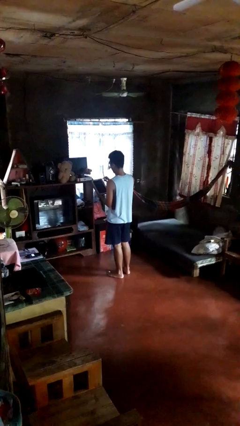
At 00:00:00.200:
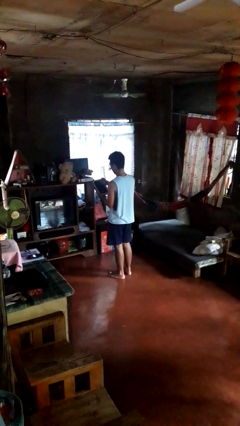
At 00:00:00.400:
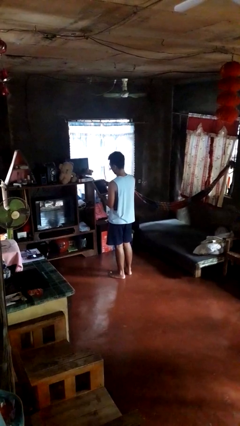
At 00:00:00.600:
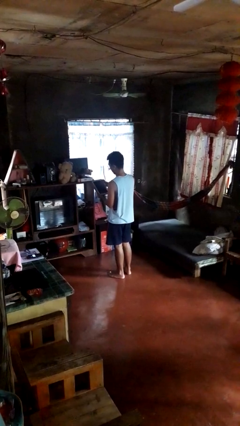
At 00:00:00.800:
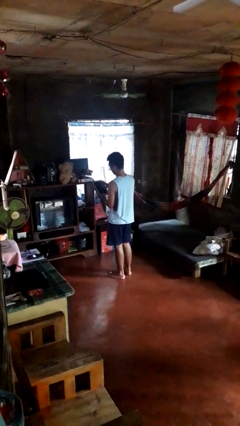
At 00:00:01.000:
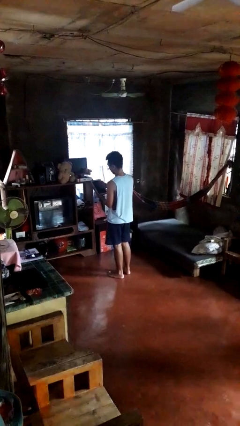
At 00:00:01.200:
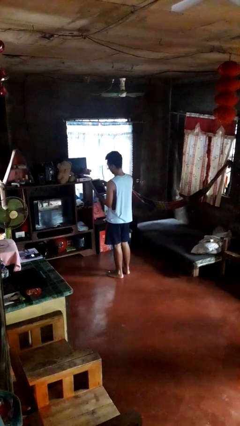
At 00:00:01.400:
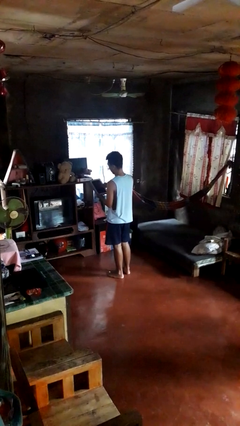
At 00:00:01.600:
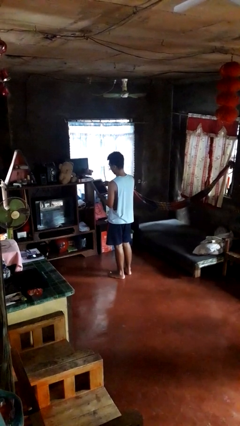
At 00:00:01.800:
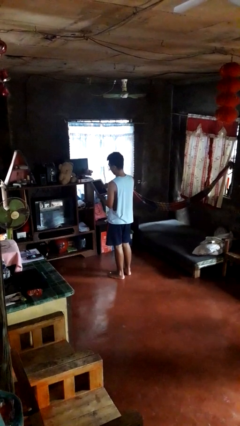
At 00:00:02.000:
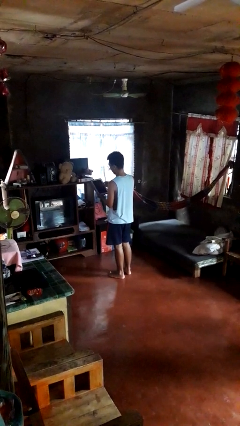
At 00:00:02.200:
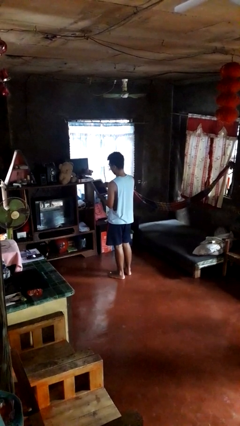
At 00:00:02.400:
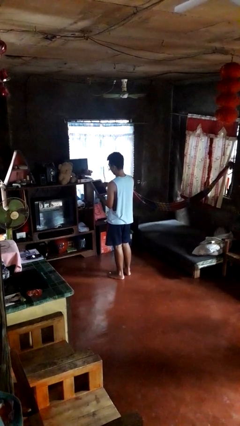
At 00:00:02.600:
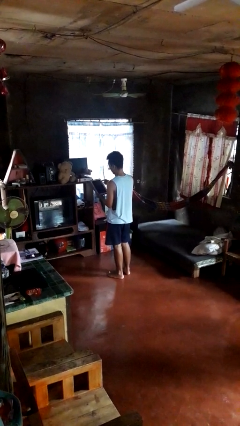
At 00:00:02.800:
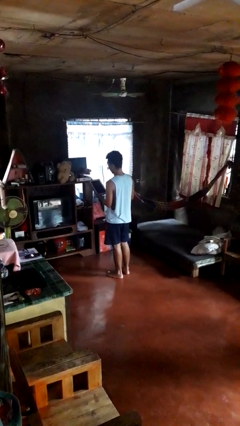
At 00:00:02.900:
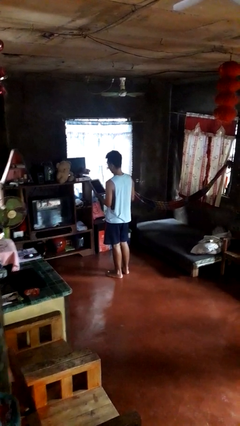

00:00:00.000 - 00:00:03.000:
person interacts with tablet

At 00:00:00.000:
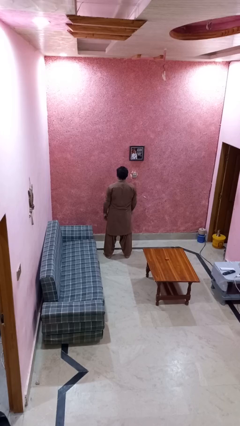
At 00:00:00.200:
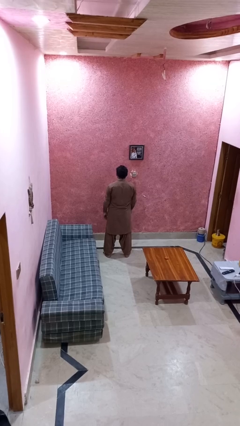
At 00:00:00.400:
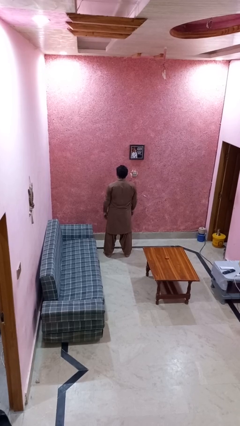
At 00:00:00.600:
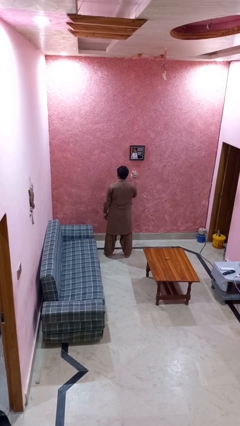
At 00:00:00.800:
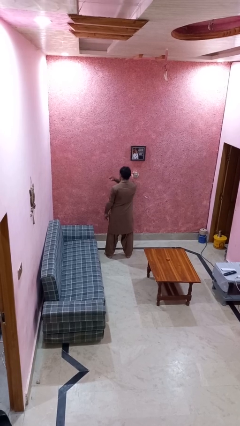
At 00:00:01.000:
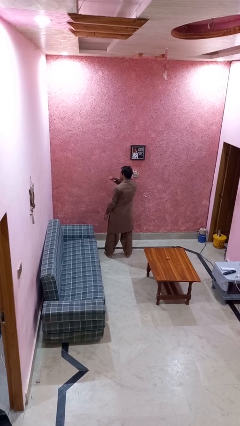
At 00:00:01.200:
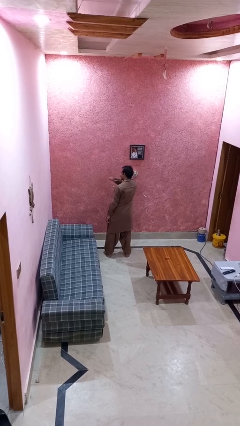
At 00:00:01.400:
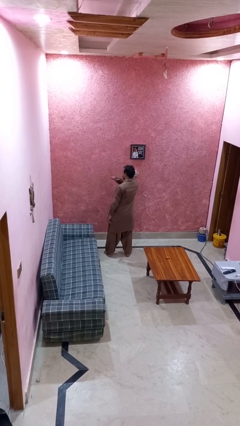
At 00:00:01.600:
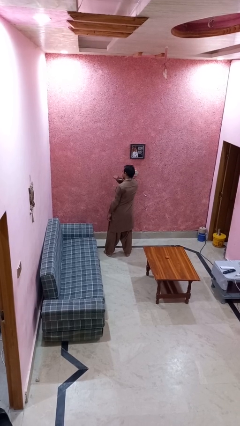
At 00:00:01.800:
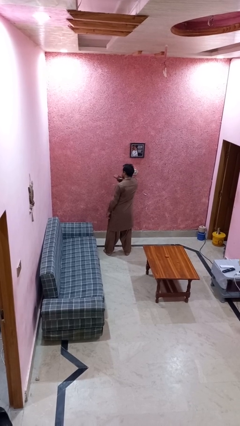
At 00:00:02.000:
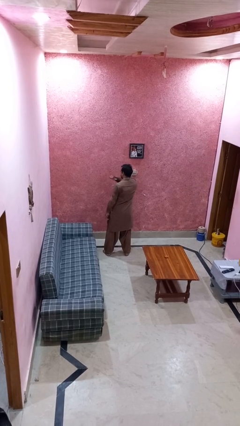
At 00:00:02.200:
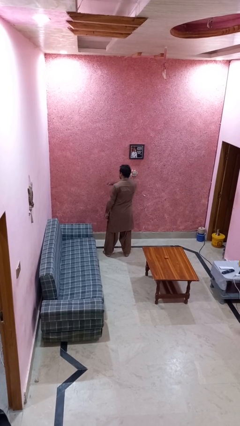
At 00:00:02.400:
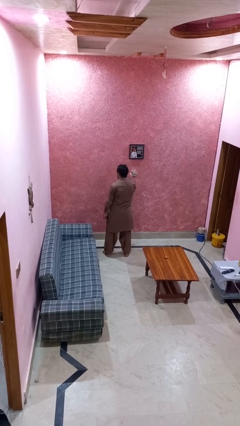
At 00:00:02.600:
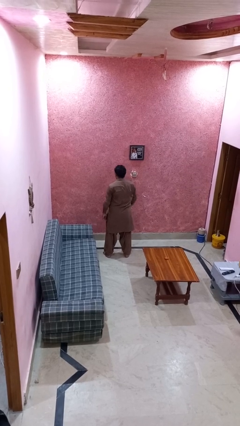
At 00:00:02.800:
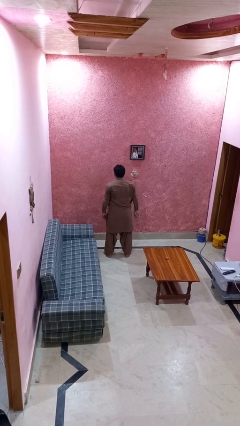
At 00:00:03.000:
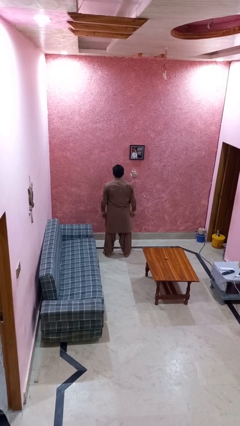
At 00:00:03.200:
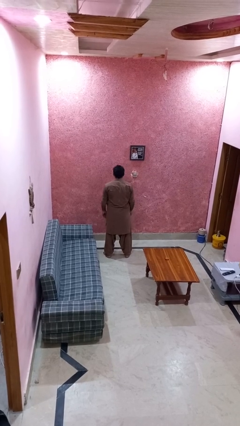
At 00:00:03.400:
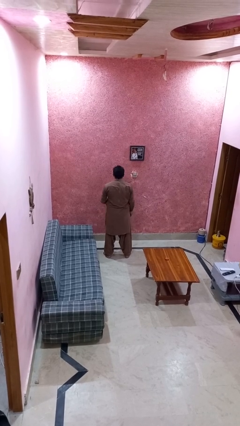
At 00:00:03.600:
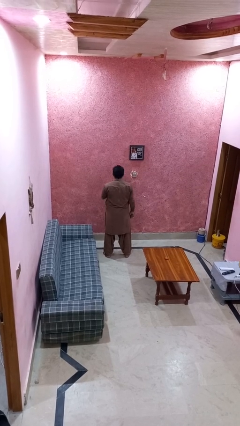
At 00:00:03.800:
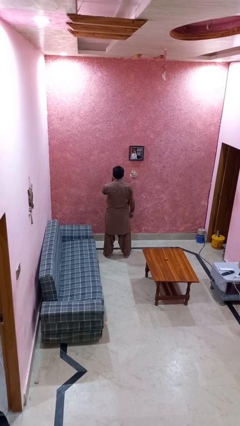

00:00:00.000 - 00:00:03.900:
person gestures behind me

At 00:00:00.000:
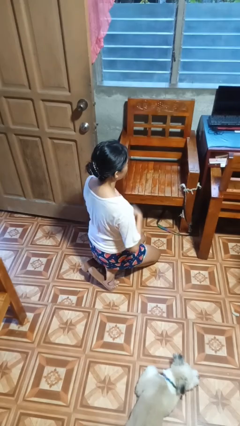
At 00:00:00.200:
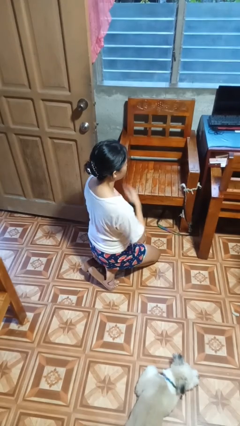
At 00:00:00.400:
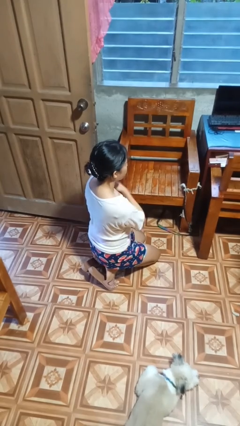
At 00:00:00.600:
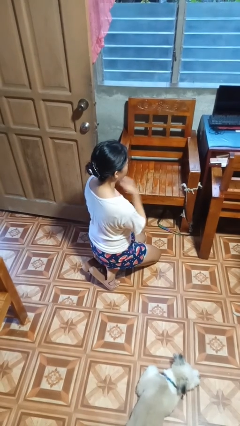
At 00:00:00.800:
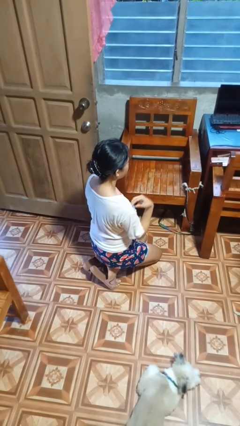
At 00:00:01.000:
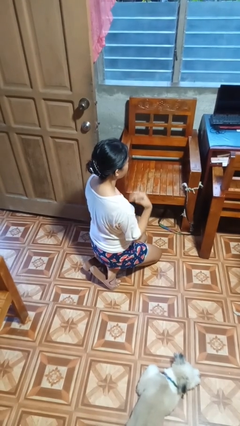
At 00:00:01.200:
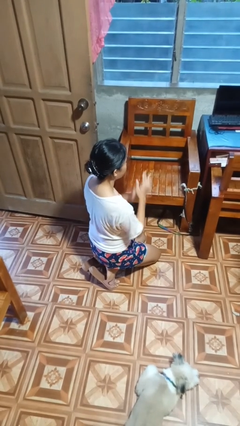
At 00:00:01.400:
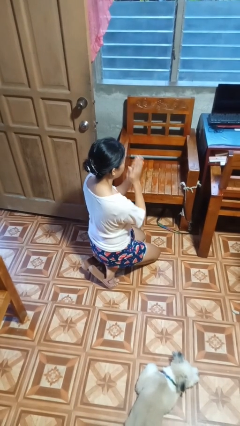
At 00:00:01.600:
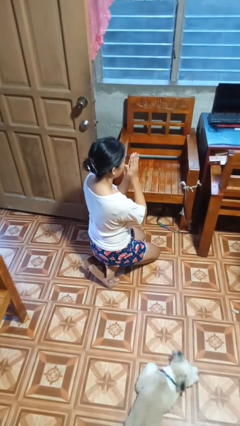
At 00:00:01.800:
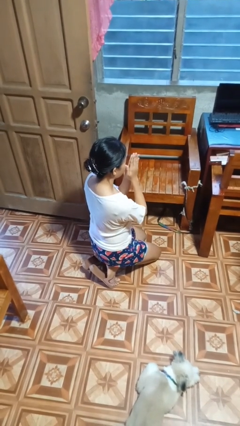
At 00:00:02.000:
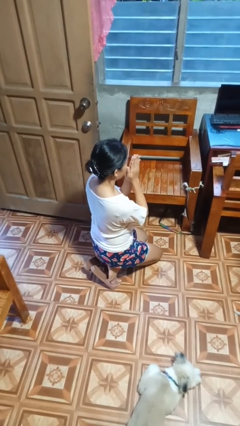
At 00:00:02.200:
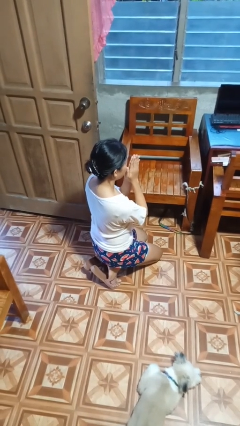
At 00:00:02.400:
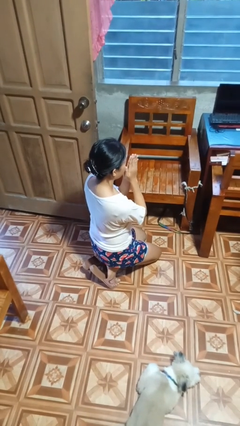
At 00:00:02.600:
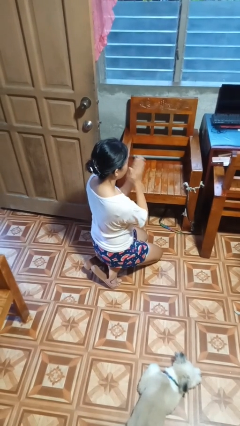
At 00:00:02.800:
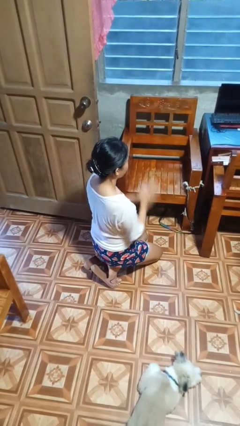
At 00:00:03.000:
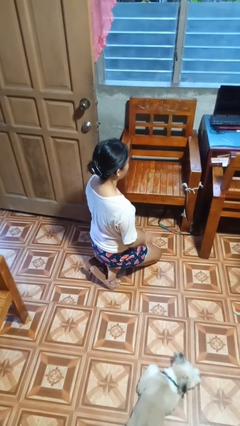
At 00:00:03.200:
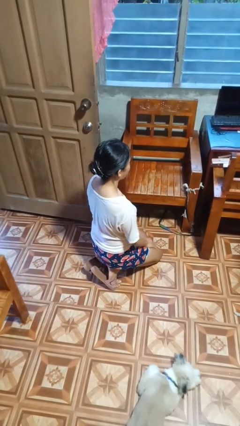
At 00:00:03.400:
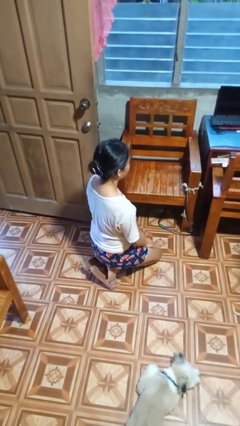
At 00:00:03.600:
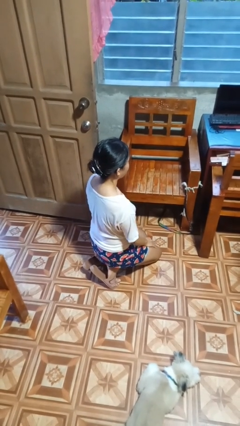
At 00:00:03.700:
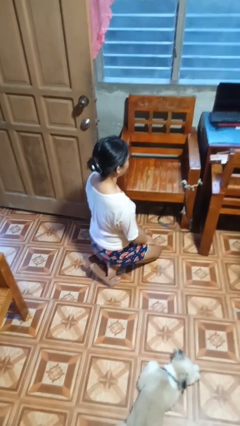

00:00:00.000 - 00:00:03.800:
person prays

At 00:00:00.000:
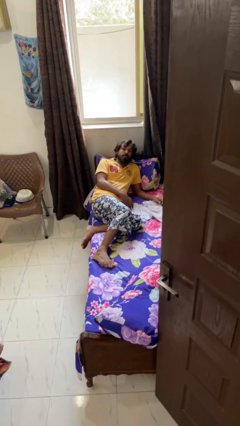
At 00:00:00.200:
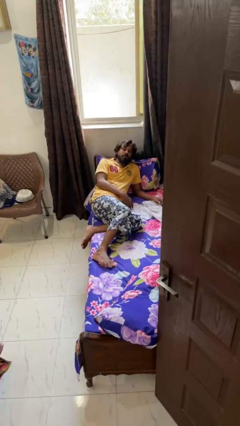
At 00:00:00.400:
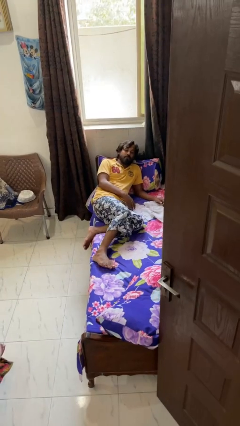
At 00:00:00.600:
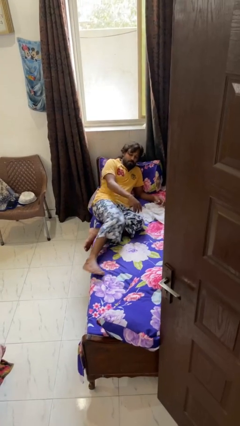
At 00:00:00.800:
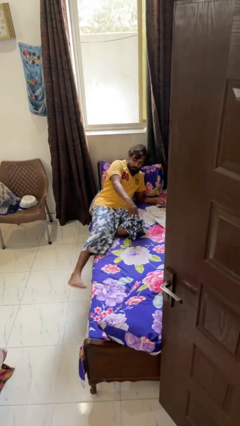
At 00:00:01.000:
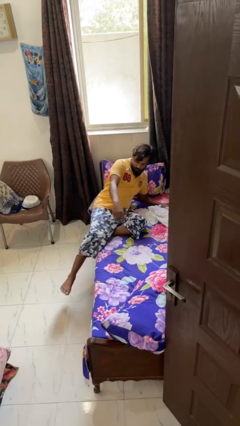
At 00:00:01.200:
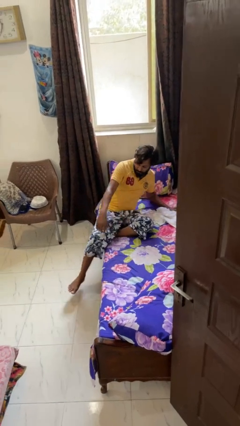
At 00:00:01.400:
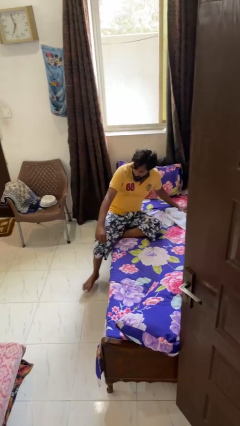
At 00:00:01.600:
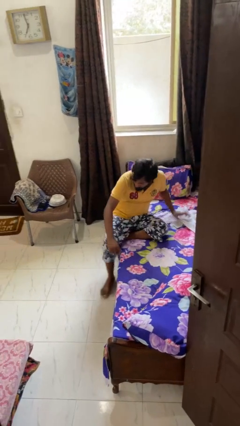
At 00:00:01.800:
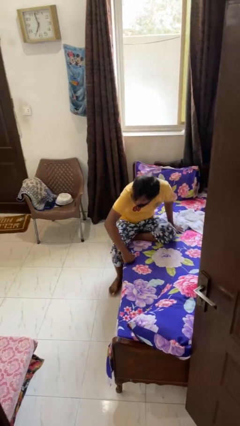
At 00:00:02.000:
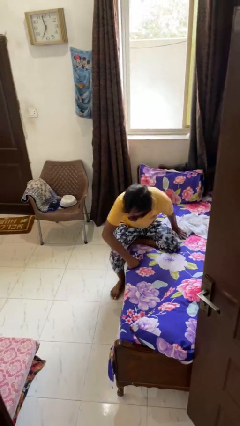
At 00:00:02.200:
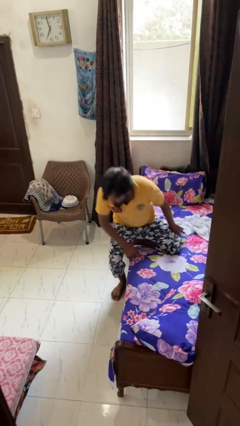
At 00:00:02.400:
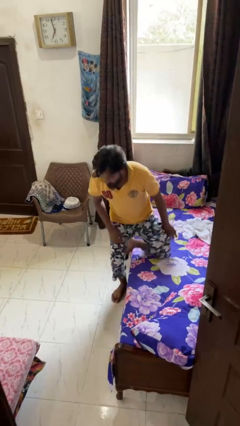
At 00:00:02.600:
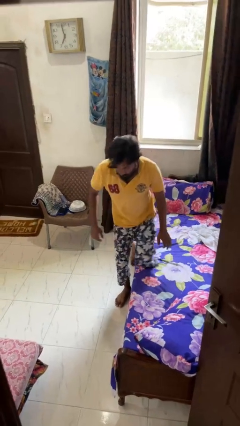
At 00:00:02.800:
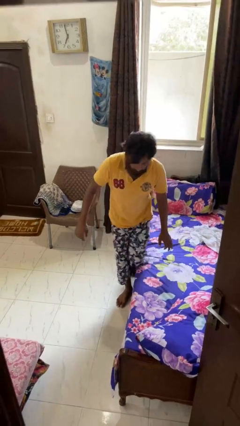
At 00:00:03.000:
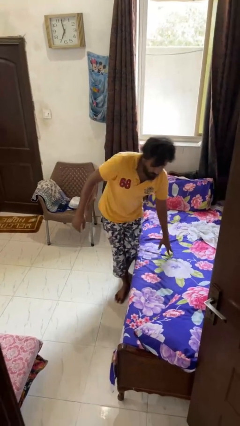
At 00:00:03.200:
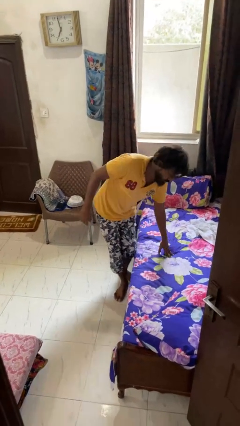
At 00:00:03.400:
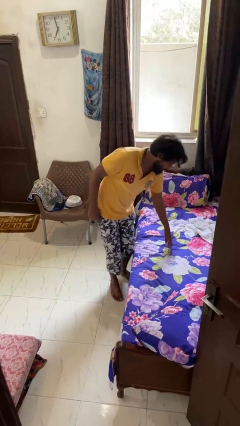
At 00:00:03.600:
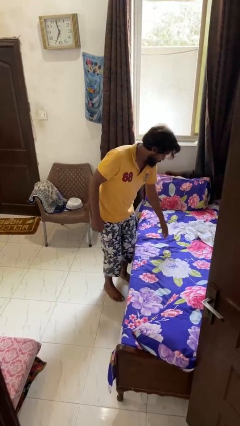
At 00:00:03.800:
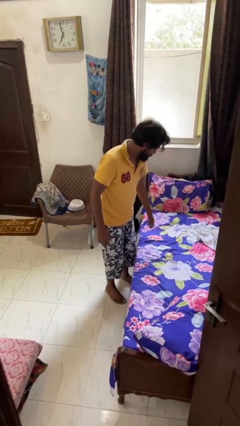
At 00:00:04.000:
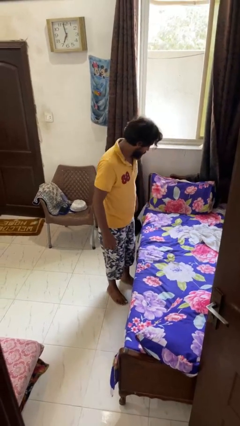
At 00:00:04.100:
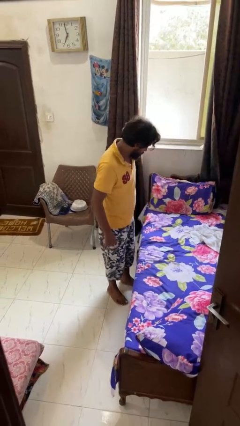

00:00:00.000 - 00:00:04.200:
person stands up

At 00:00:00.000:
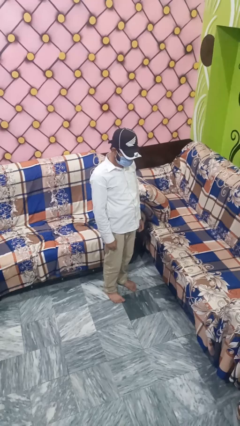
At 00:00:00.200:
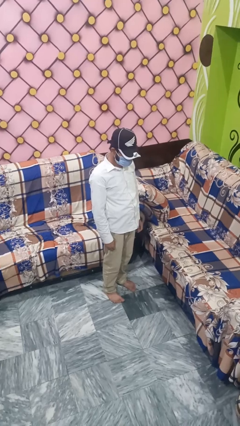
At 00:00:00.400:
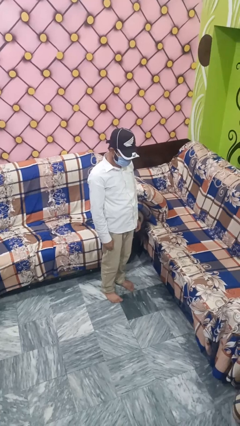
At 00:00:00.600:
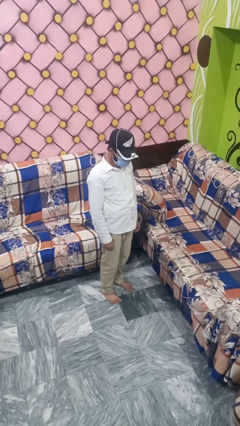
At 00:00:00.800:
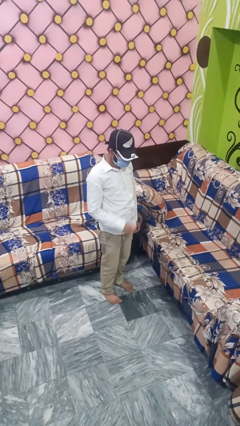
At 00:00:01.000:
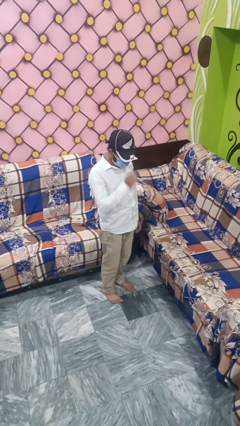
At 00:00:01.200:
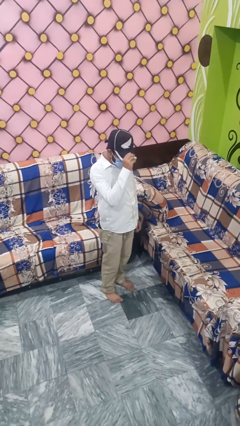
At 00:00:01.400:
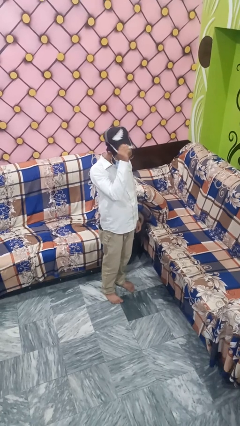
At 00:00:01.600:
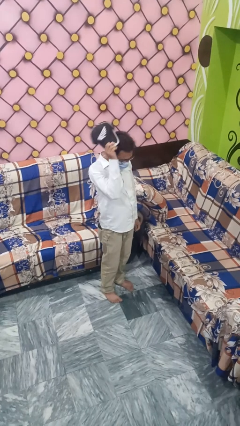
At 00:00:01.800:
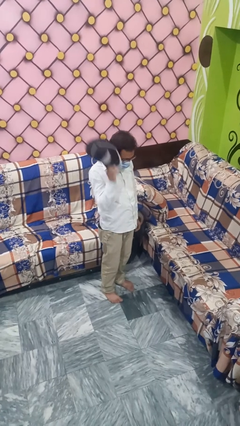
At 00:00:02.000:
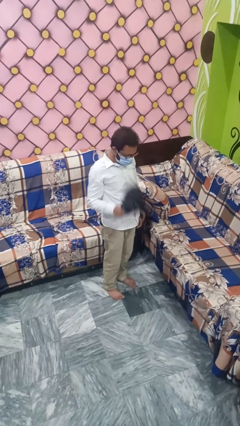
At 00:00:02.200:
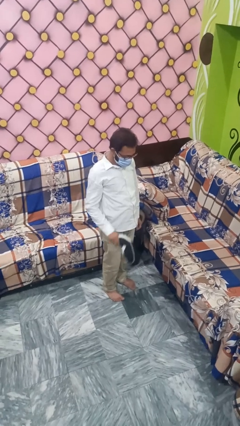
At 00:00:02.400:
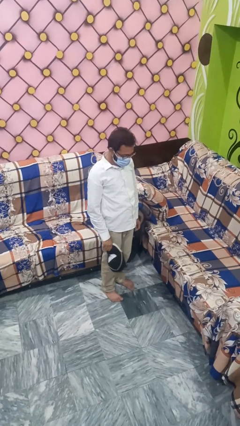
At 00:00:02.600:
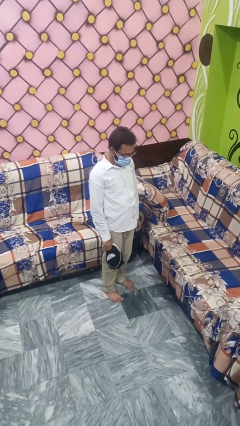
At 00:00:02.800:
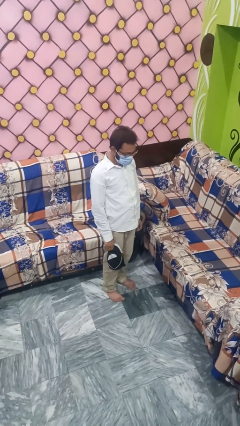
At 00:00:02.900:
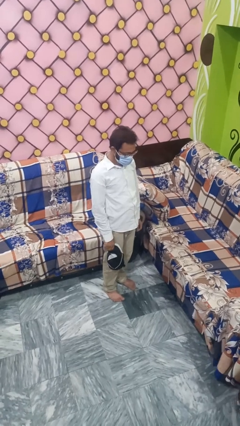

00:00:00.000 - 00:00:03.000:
person takes off hat
